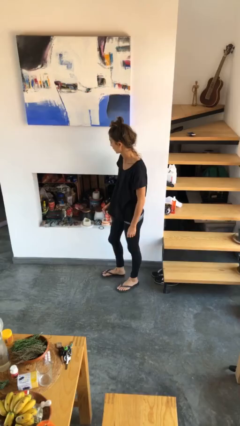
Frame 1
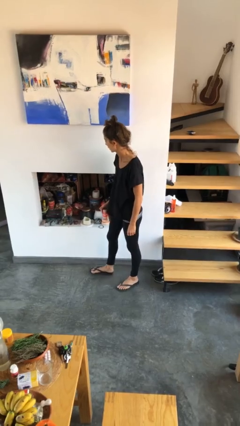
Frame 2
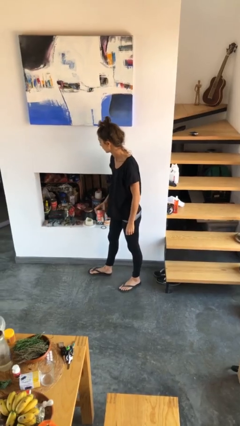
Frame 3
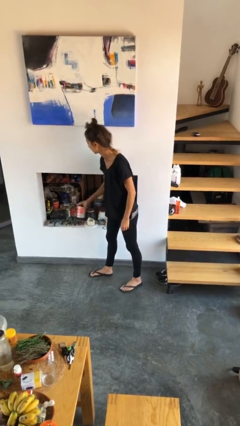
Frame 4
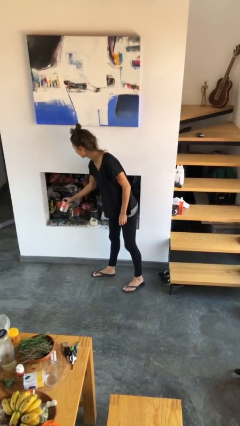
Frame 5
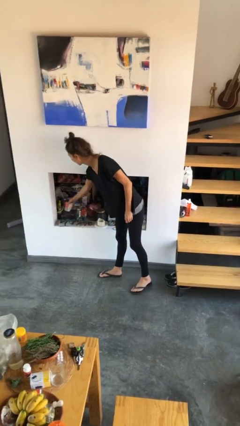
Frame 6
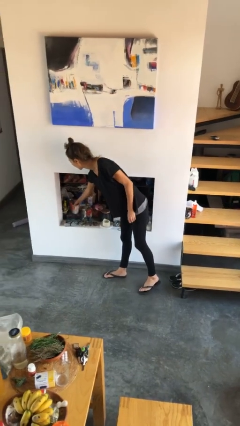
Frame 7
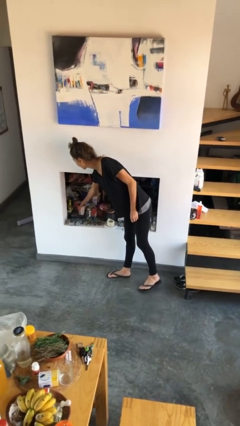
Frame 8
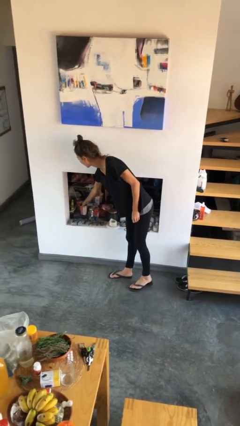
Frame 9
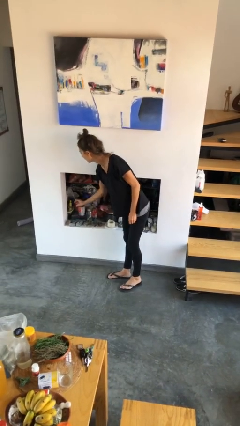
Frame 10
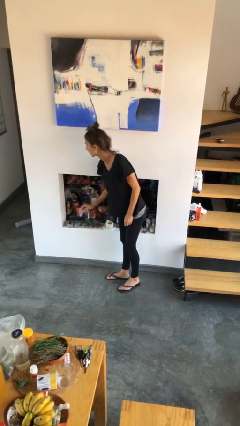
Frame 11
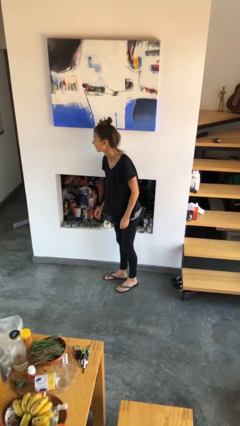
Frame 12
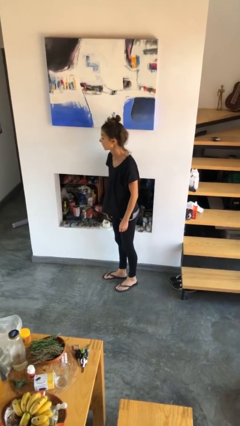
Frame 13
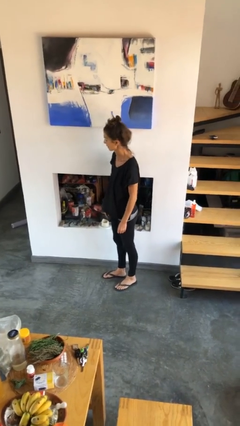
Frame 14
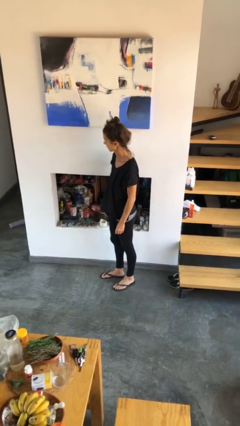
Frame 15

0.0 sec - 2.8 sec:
person puts down object into cabinet

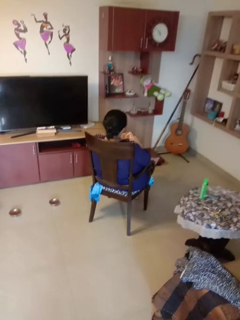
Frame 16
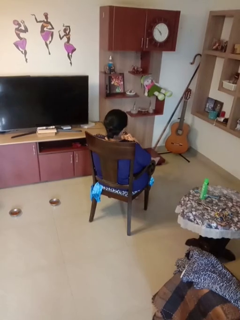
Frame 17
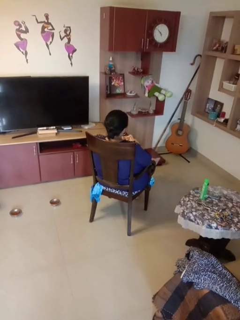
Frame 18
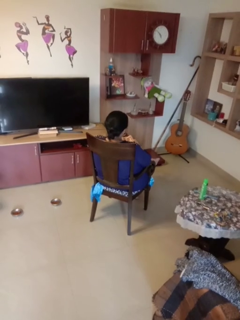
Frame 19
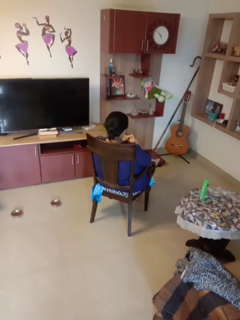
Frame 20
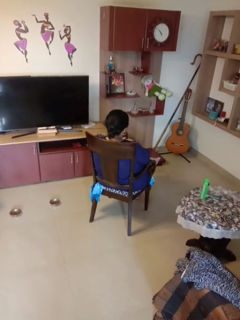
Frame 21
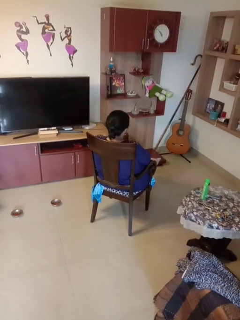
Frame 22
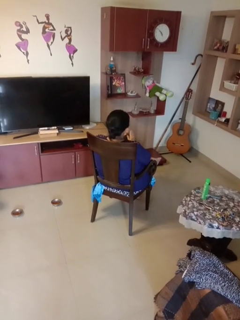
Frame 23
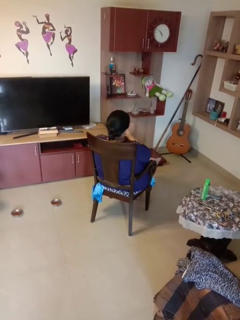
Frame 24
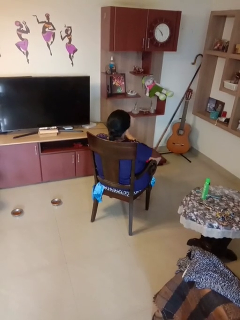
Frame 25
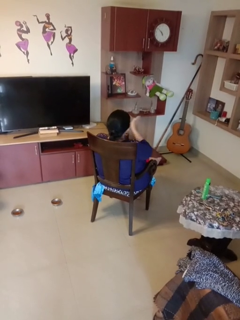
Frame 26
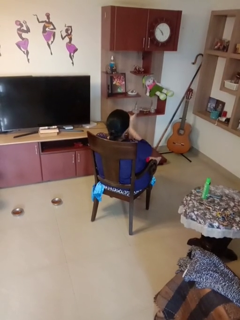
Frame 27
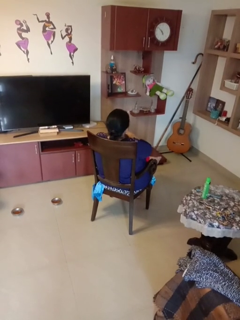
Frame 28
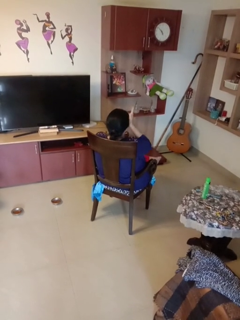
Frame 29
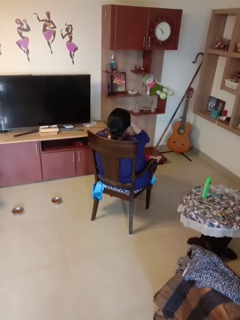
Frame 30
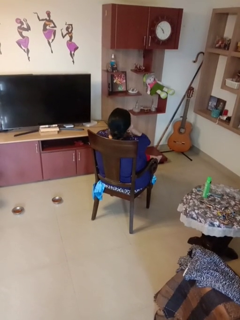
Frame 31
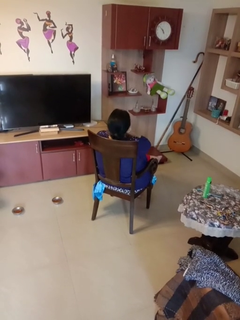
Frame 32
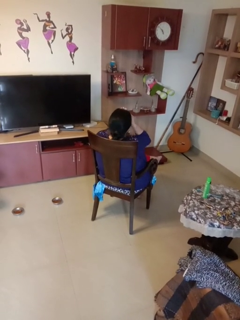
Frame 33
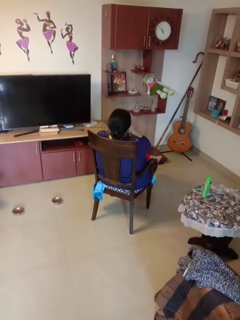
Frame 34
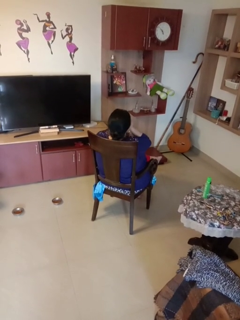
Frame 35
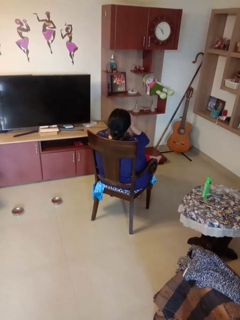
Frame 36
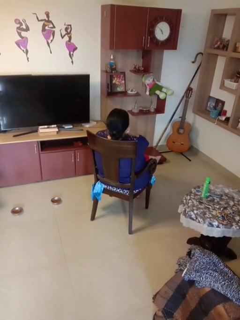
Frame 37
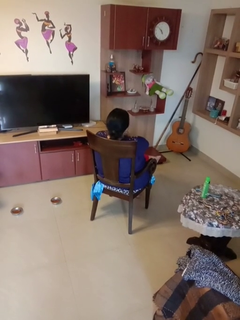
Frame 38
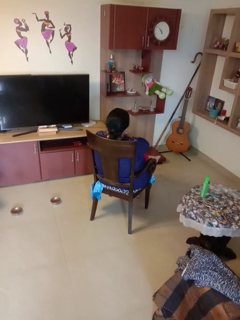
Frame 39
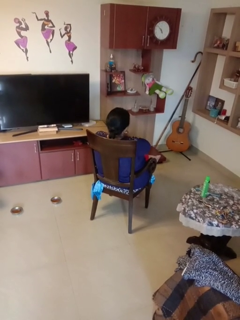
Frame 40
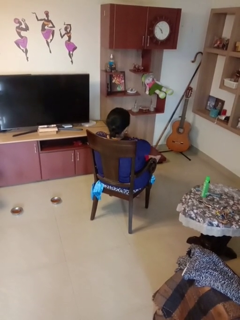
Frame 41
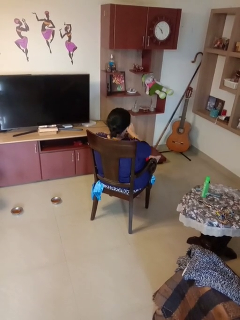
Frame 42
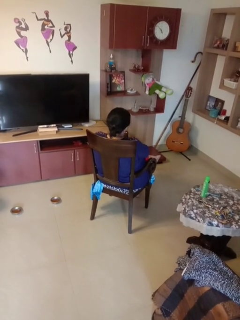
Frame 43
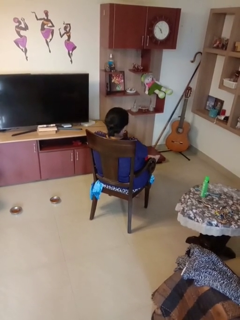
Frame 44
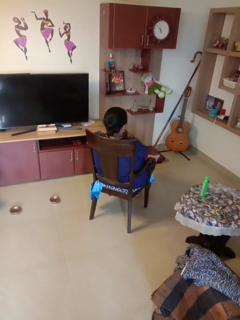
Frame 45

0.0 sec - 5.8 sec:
person applies facial moisturizer

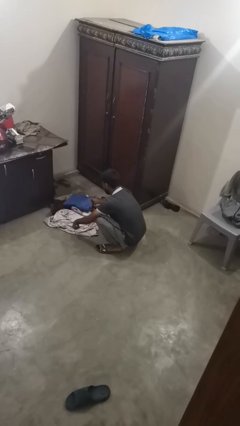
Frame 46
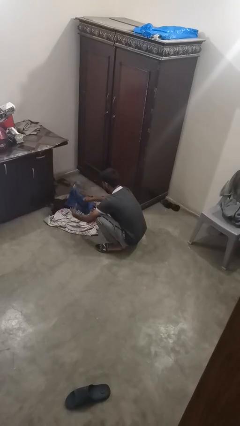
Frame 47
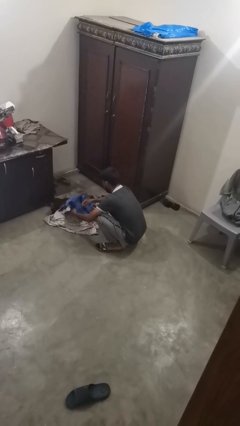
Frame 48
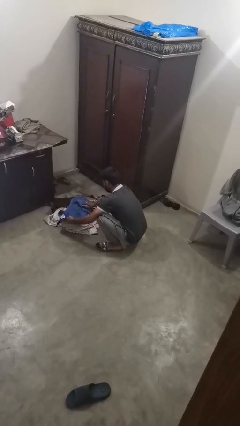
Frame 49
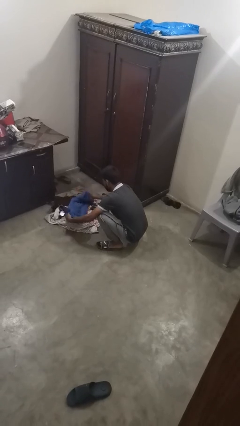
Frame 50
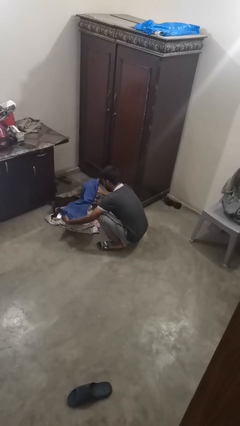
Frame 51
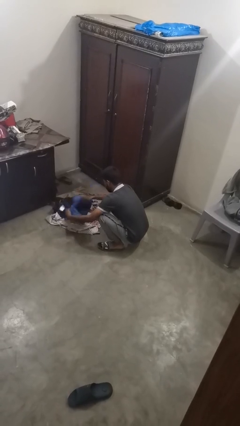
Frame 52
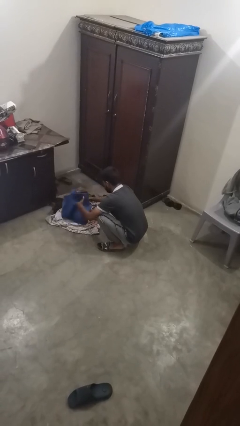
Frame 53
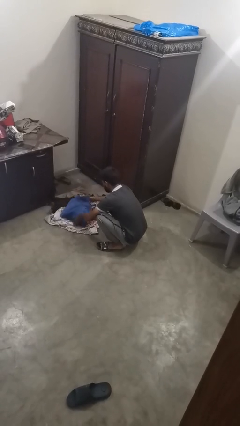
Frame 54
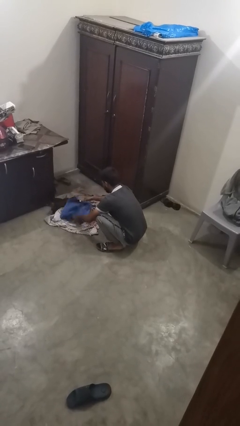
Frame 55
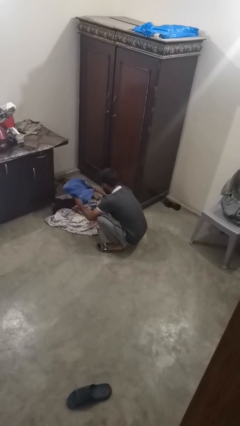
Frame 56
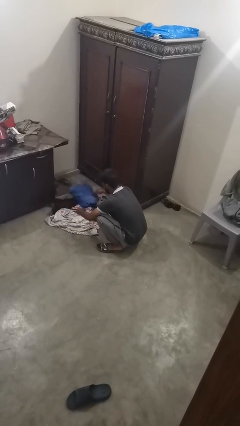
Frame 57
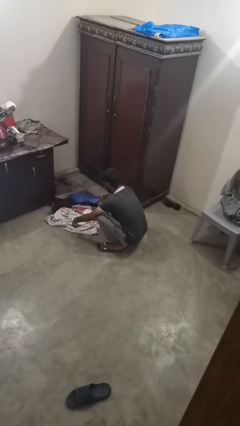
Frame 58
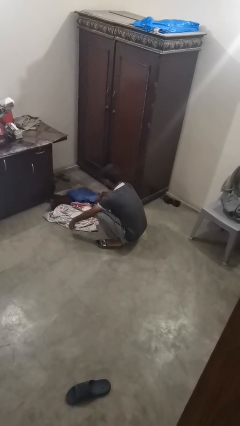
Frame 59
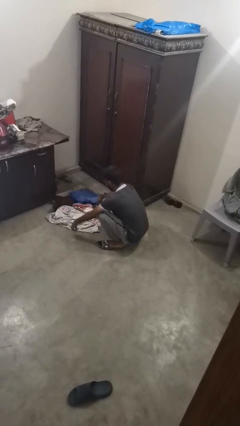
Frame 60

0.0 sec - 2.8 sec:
person folds pants

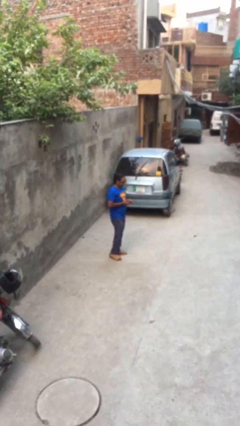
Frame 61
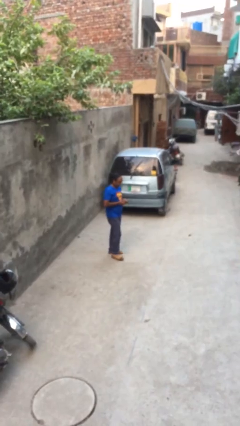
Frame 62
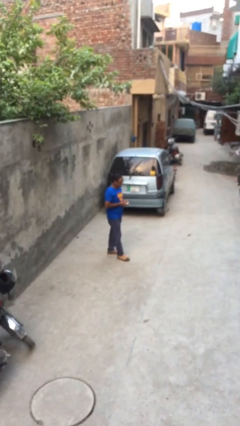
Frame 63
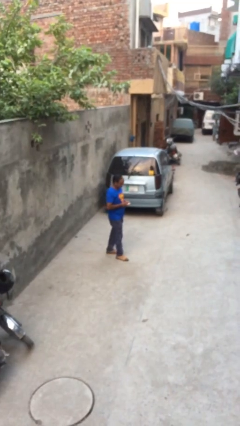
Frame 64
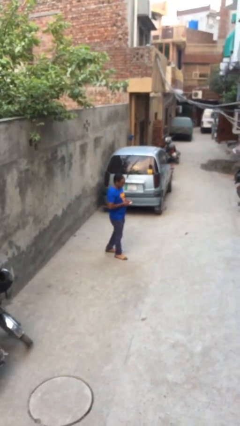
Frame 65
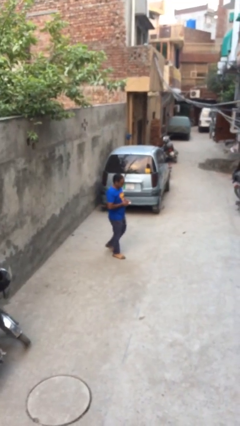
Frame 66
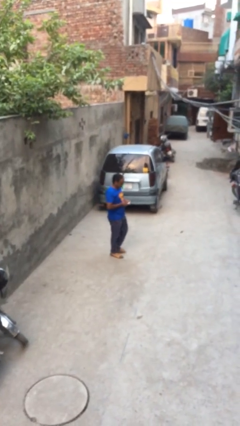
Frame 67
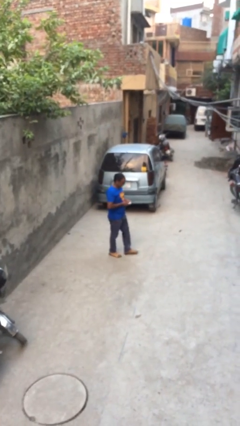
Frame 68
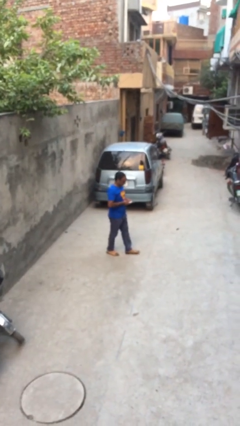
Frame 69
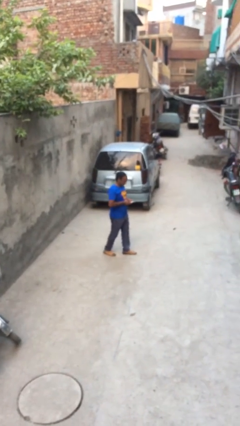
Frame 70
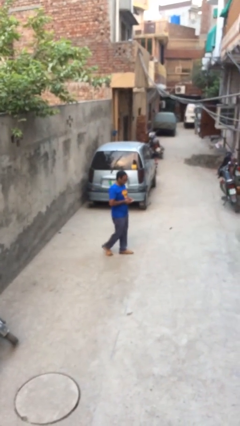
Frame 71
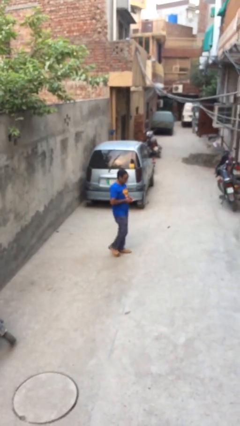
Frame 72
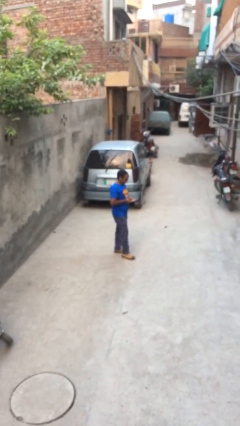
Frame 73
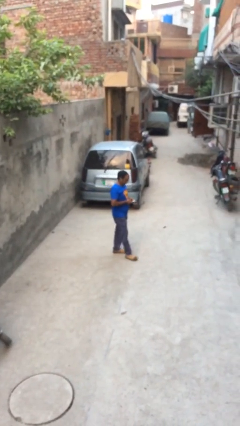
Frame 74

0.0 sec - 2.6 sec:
person texts on phone

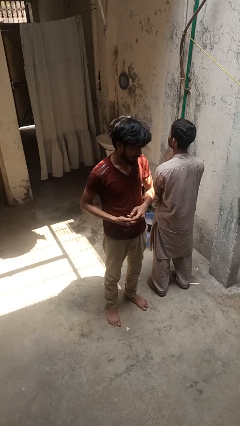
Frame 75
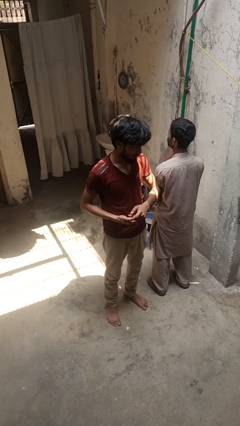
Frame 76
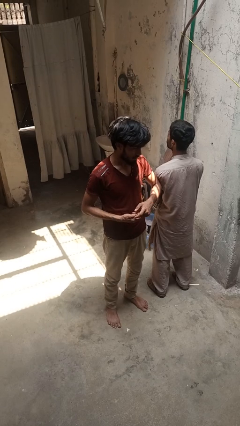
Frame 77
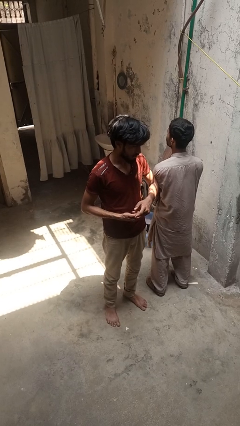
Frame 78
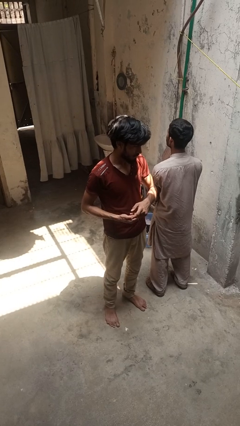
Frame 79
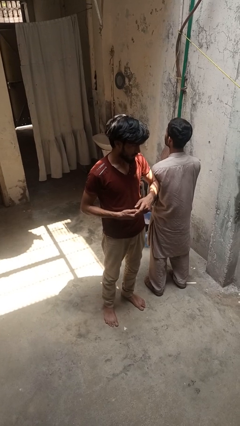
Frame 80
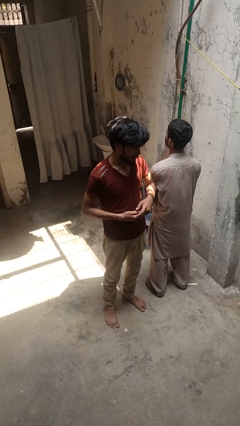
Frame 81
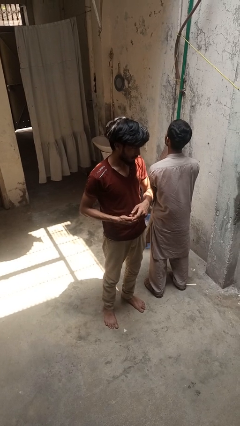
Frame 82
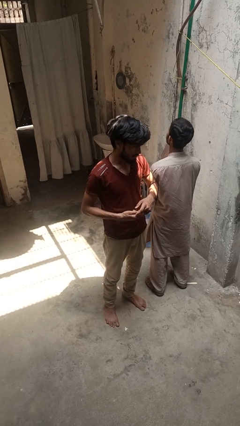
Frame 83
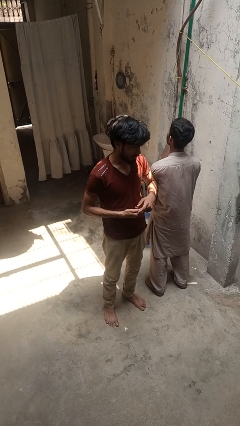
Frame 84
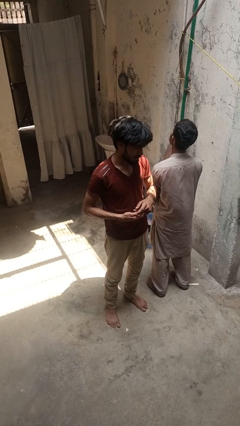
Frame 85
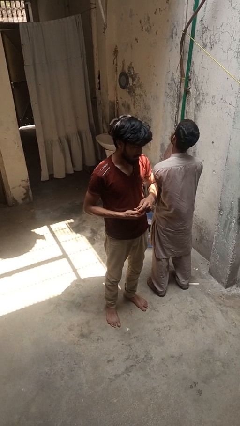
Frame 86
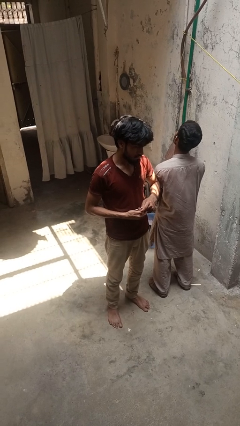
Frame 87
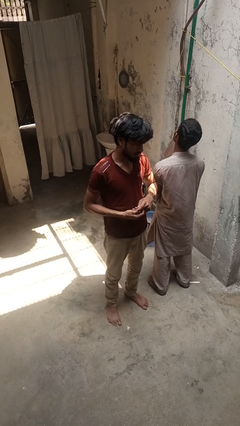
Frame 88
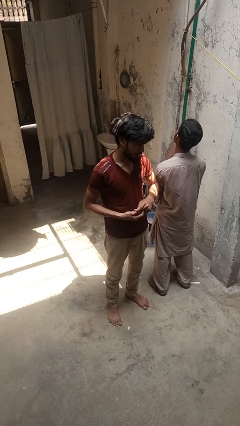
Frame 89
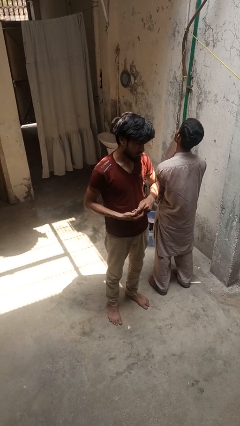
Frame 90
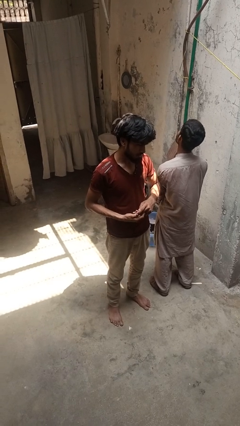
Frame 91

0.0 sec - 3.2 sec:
person nudges person with elbow

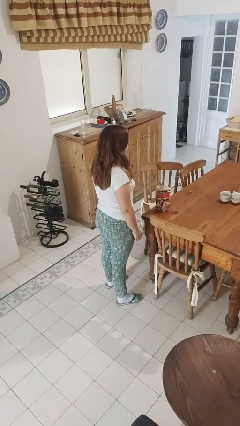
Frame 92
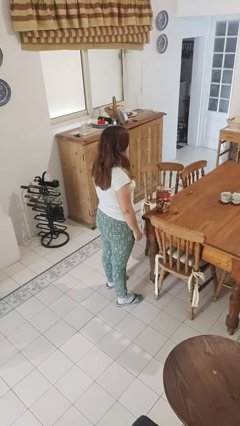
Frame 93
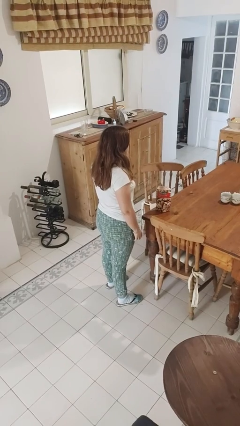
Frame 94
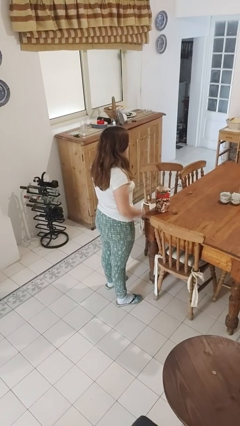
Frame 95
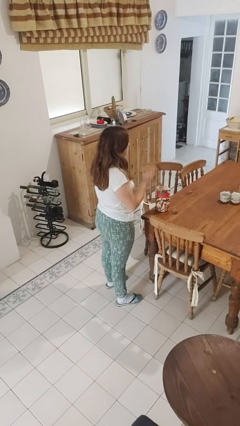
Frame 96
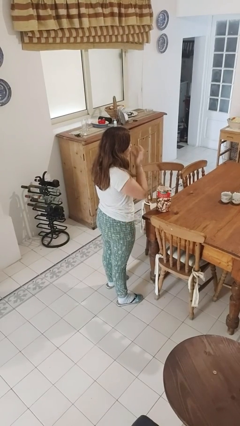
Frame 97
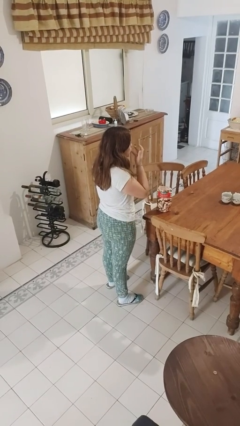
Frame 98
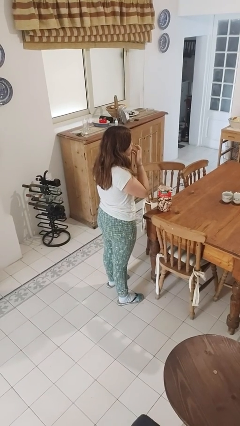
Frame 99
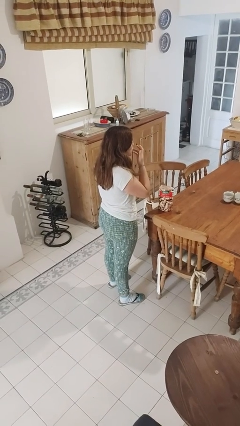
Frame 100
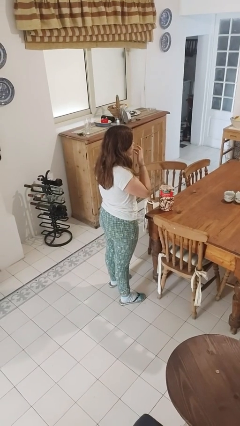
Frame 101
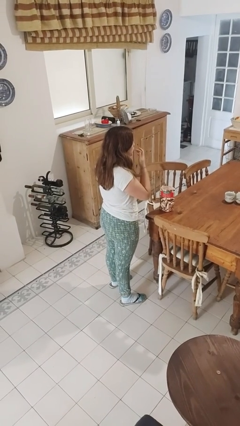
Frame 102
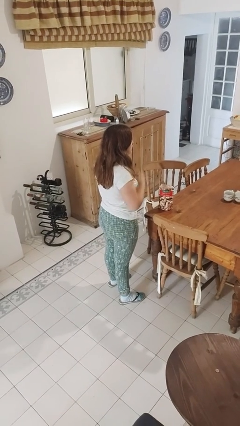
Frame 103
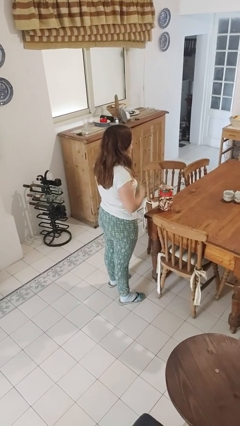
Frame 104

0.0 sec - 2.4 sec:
person licks fingers
